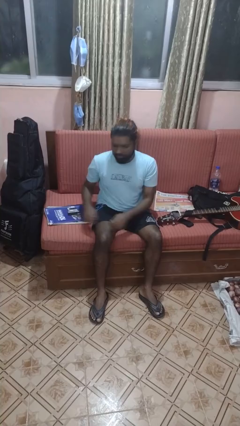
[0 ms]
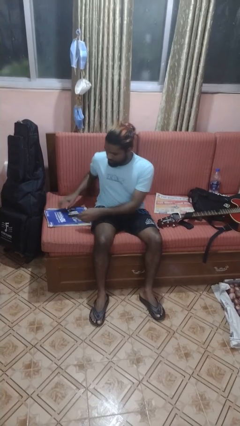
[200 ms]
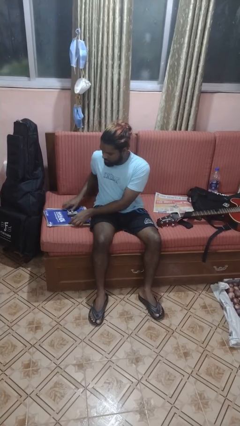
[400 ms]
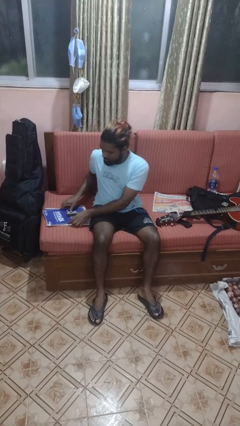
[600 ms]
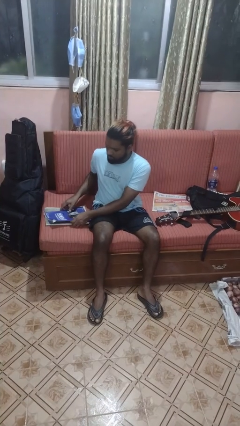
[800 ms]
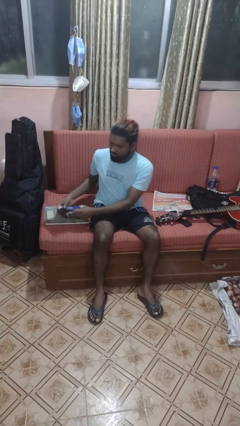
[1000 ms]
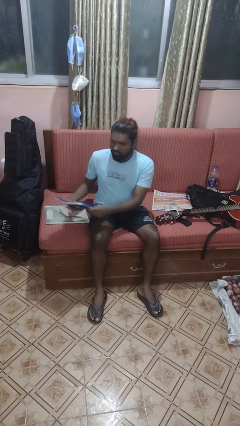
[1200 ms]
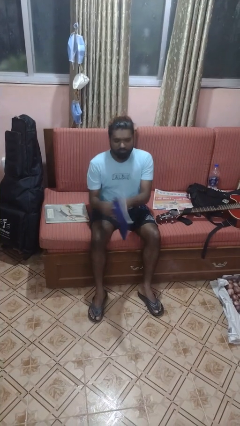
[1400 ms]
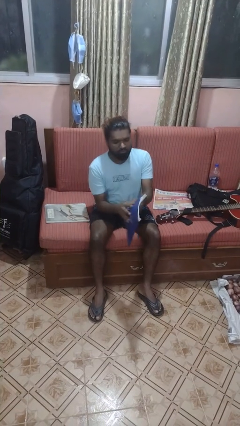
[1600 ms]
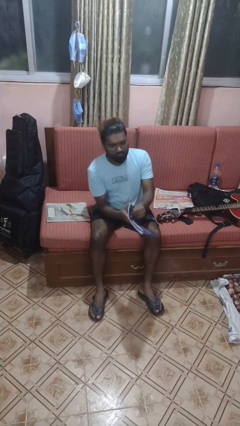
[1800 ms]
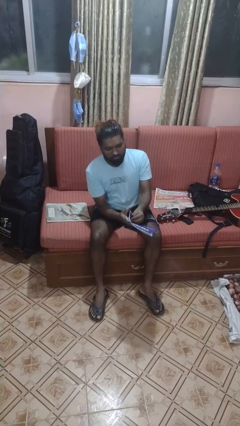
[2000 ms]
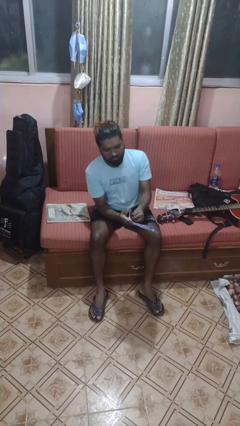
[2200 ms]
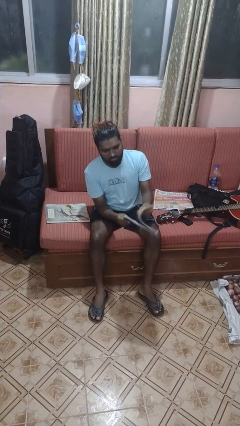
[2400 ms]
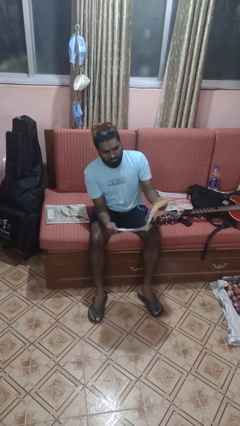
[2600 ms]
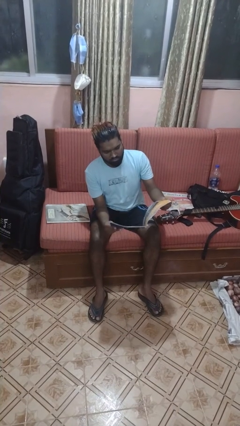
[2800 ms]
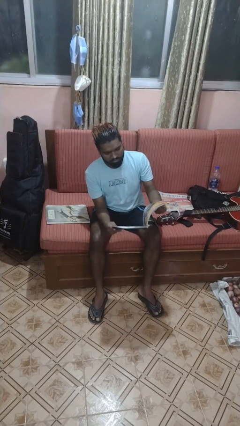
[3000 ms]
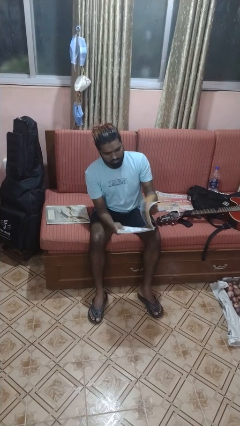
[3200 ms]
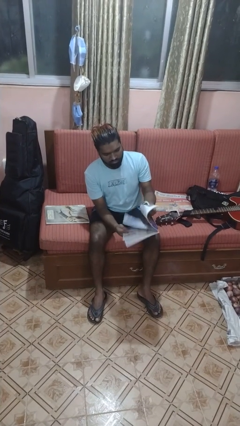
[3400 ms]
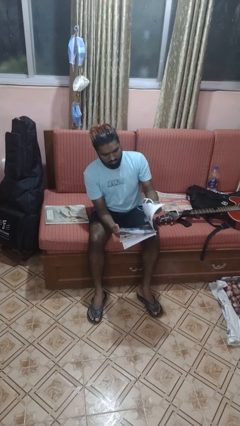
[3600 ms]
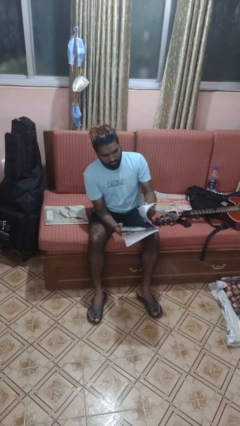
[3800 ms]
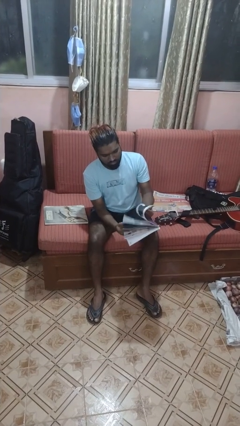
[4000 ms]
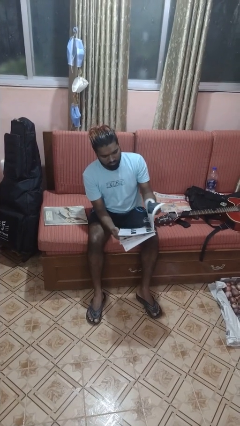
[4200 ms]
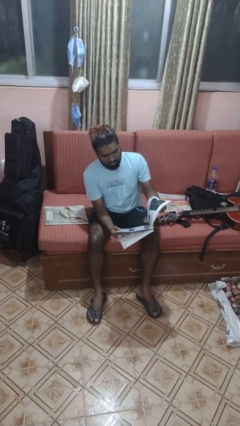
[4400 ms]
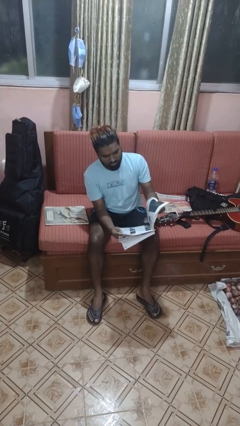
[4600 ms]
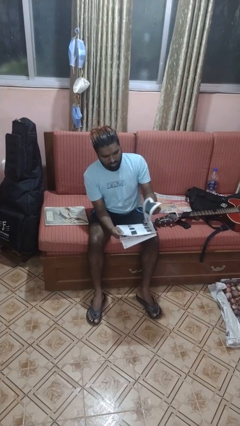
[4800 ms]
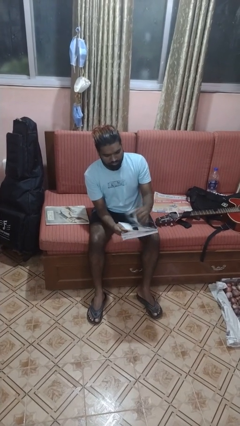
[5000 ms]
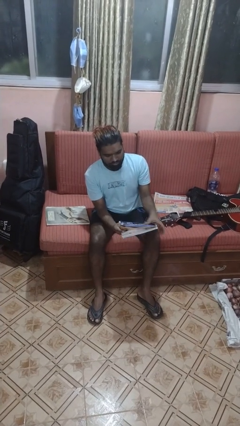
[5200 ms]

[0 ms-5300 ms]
person reads magazine

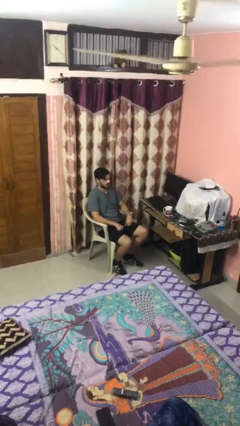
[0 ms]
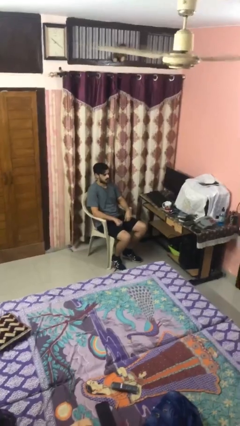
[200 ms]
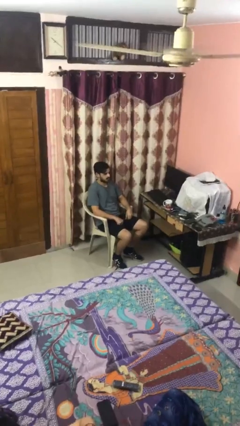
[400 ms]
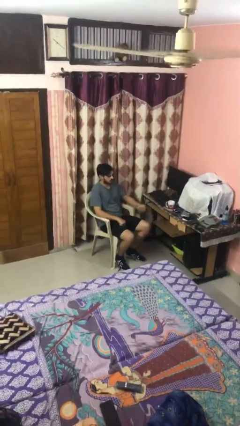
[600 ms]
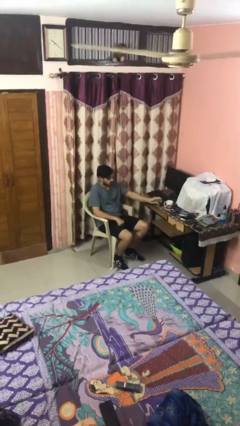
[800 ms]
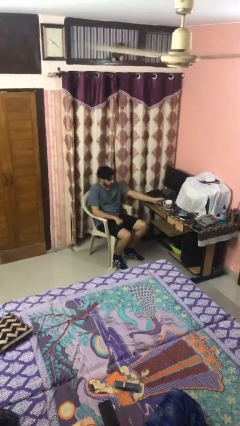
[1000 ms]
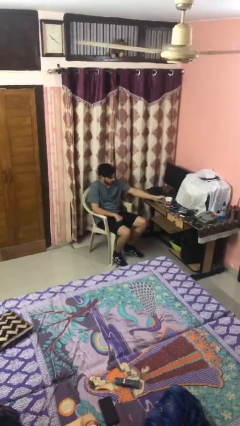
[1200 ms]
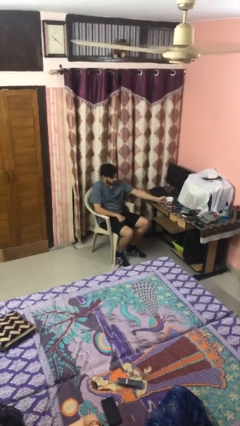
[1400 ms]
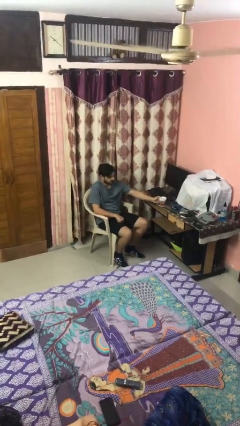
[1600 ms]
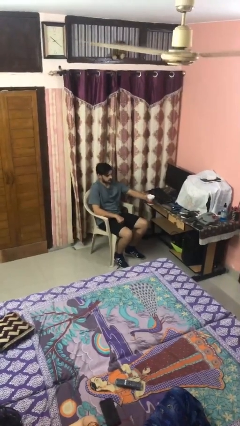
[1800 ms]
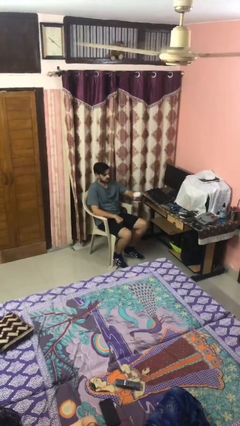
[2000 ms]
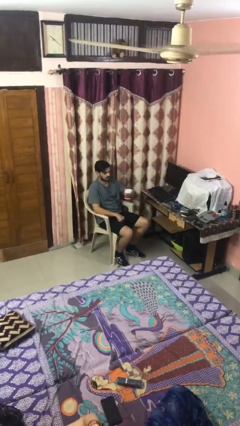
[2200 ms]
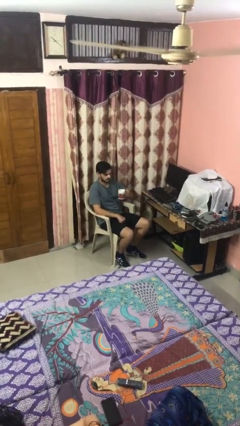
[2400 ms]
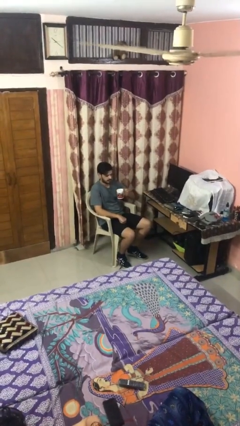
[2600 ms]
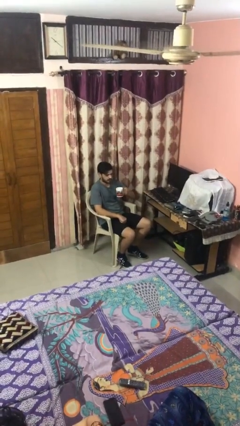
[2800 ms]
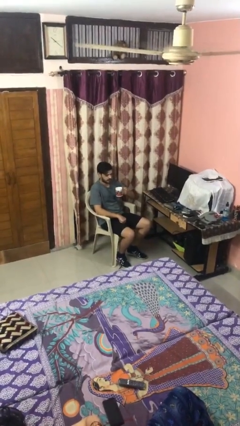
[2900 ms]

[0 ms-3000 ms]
person picks up object from table

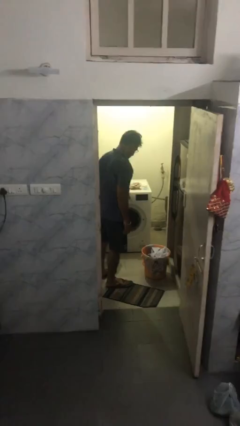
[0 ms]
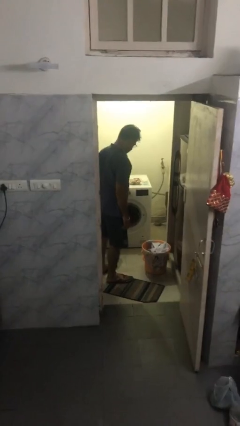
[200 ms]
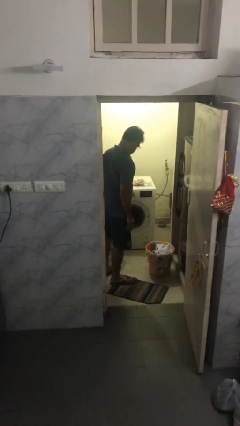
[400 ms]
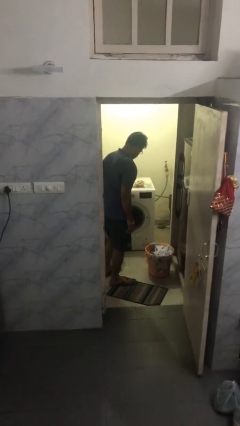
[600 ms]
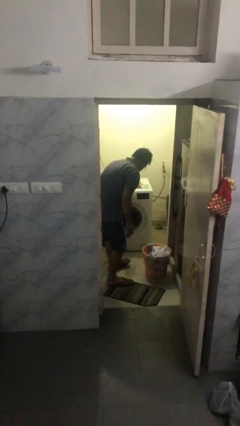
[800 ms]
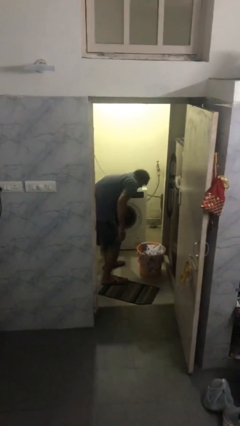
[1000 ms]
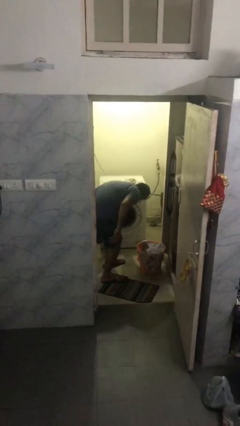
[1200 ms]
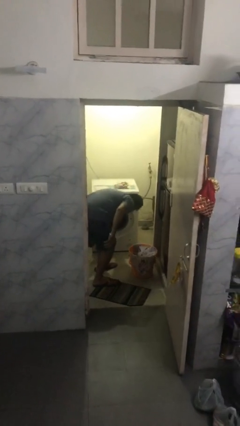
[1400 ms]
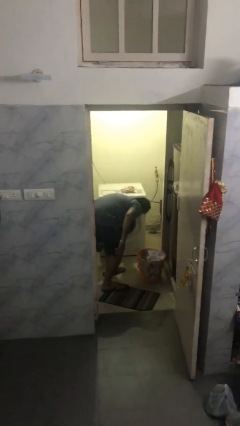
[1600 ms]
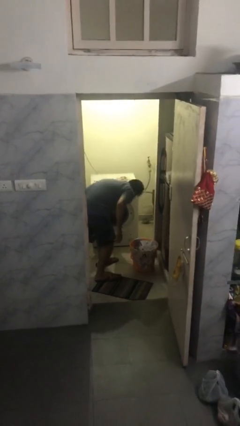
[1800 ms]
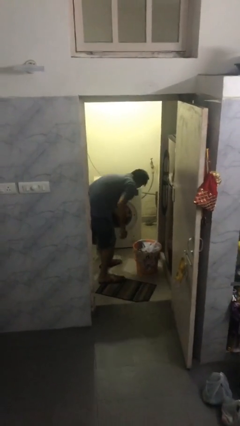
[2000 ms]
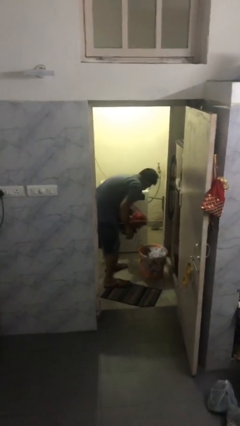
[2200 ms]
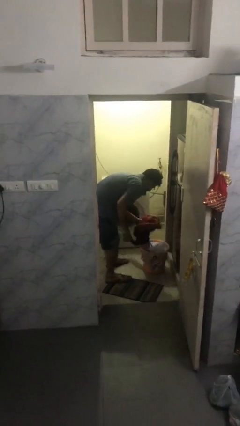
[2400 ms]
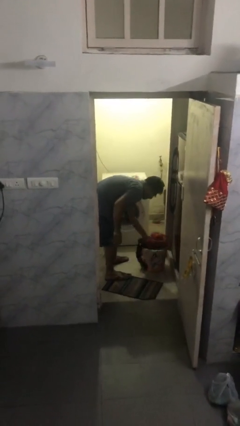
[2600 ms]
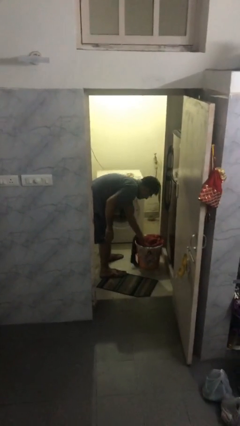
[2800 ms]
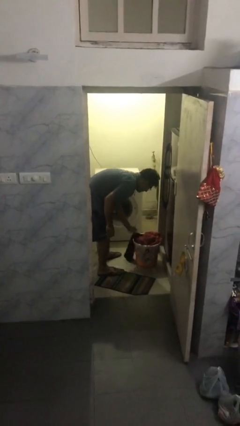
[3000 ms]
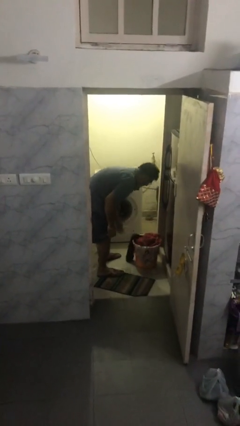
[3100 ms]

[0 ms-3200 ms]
person unloads dryer

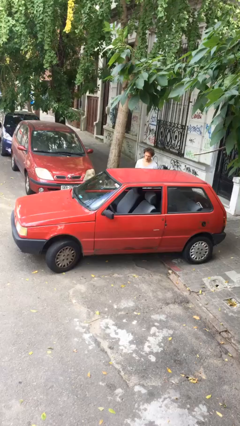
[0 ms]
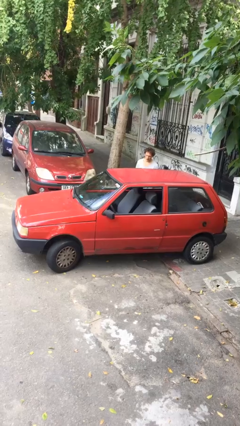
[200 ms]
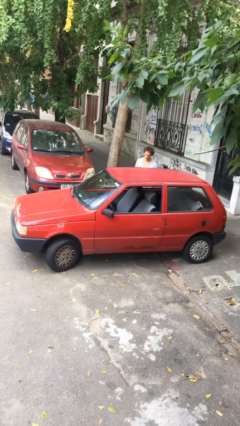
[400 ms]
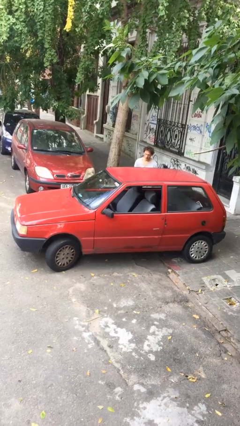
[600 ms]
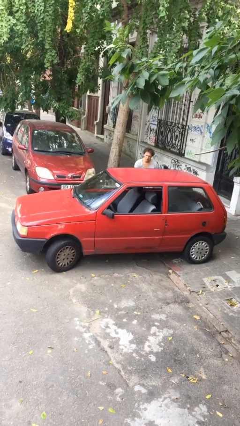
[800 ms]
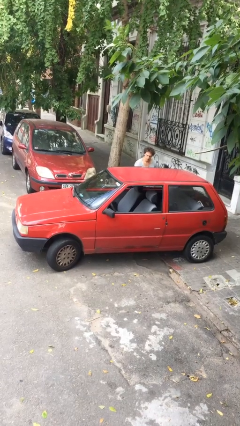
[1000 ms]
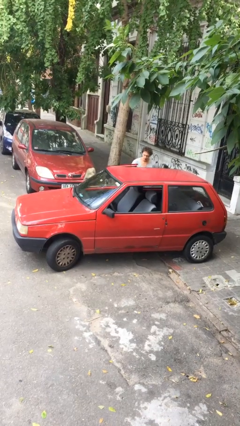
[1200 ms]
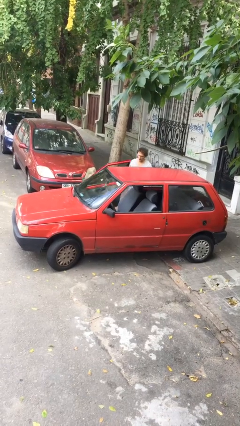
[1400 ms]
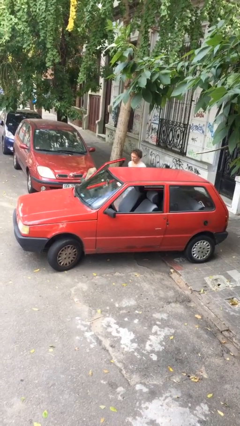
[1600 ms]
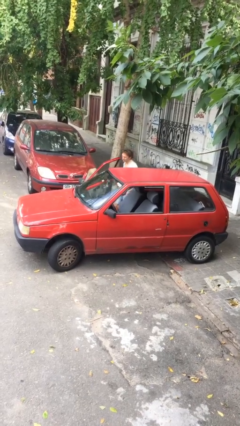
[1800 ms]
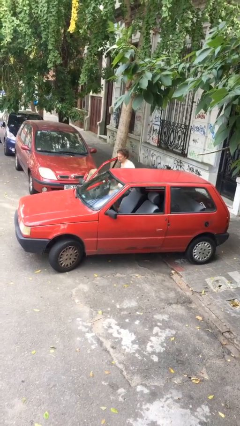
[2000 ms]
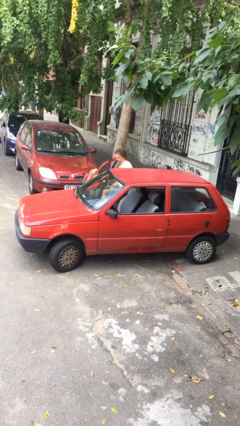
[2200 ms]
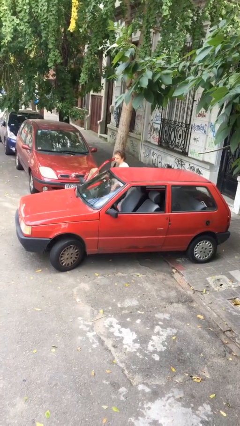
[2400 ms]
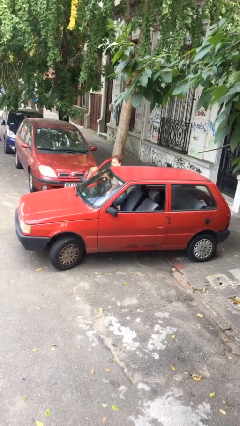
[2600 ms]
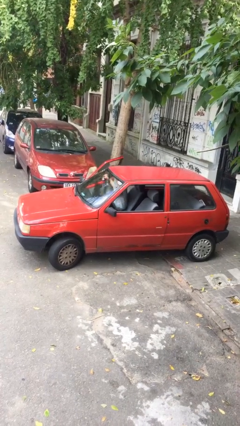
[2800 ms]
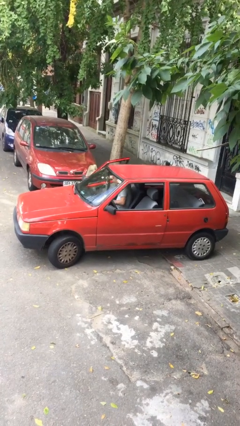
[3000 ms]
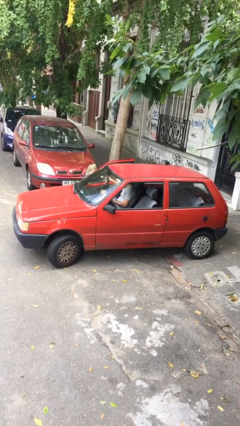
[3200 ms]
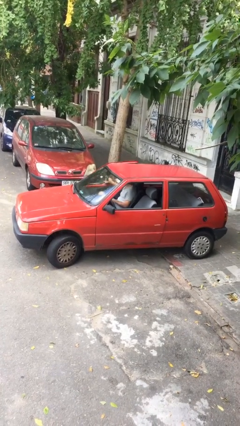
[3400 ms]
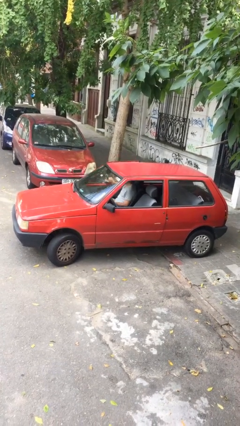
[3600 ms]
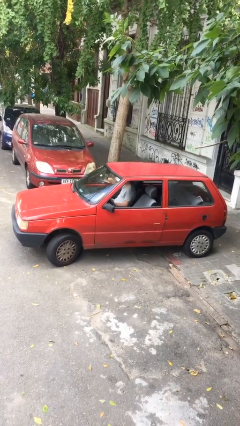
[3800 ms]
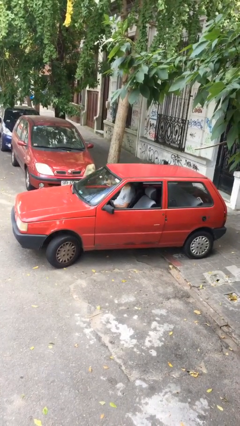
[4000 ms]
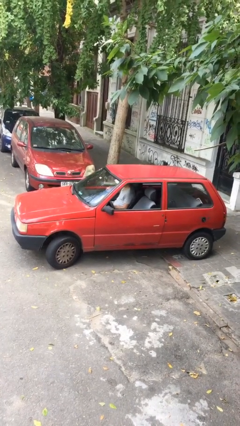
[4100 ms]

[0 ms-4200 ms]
car picks up person

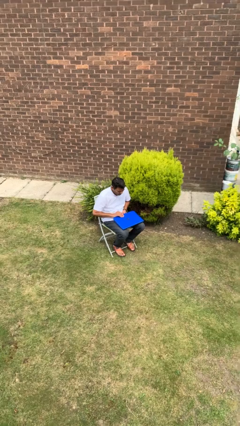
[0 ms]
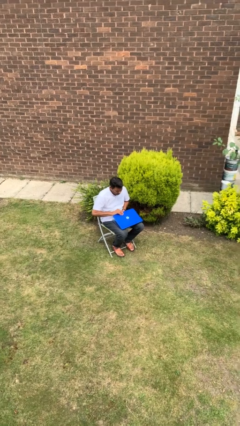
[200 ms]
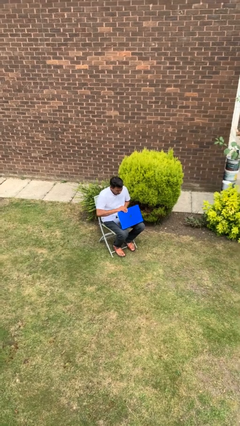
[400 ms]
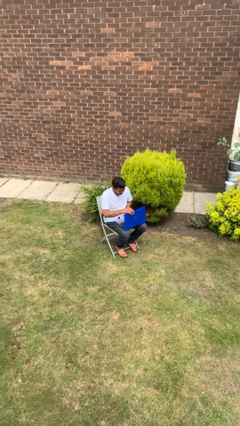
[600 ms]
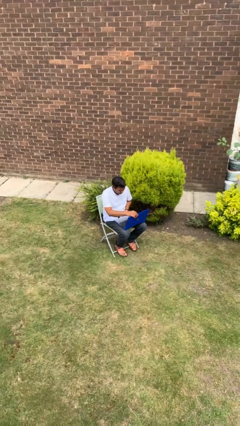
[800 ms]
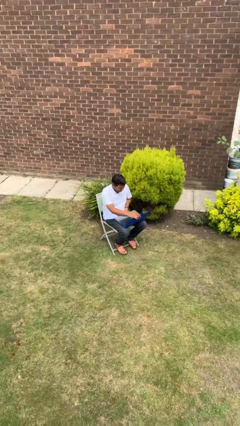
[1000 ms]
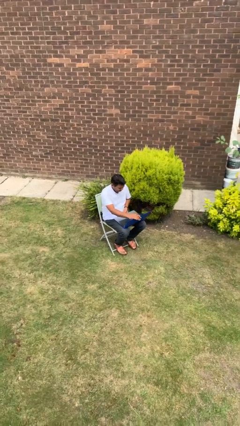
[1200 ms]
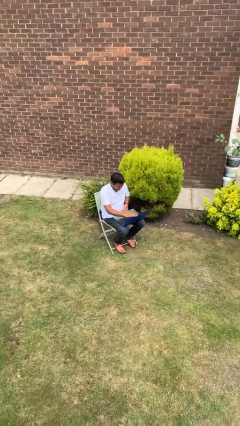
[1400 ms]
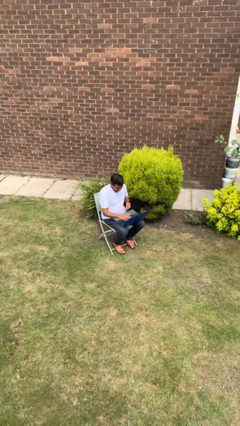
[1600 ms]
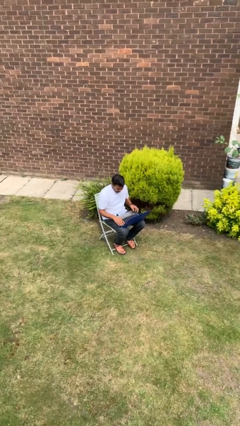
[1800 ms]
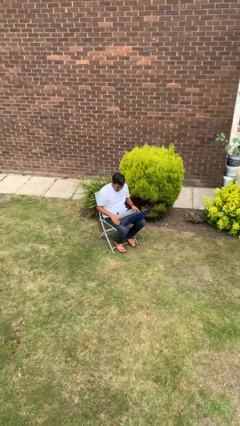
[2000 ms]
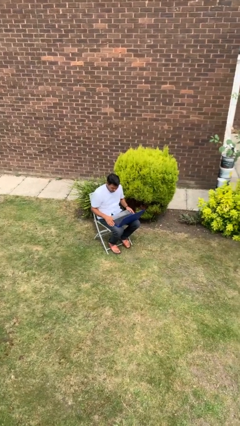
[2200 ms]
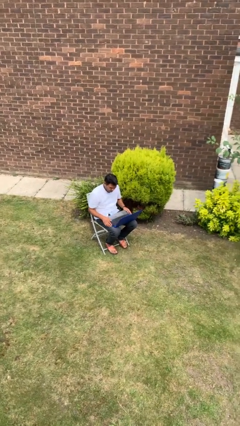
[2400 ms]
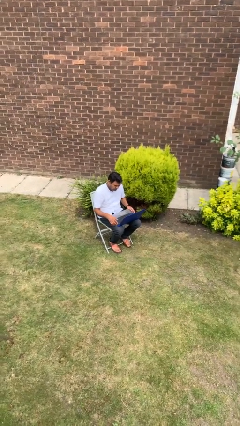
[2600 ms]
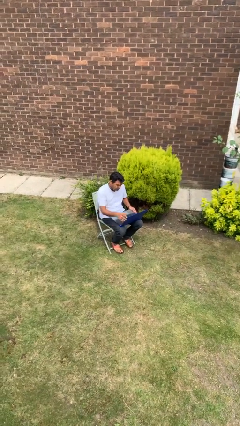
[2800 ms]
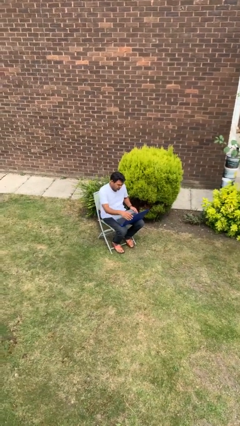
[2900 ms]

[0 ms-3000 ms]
person opens laptop
